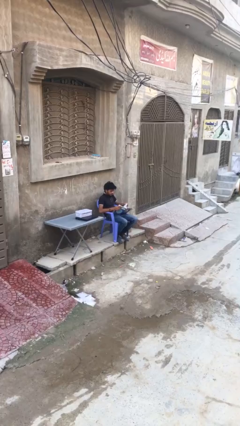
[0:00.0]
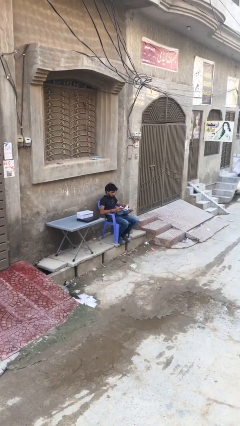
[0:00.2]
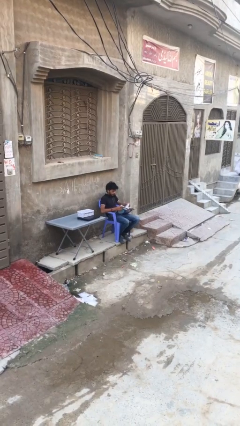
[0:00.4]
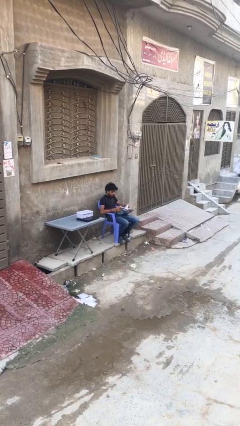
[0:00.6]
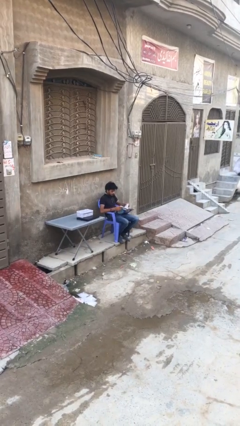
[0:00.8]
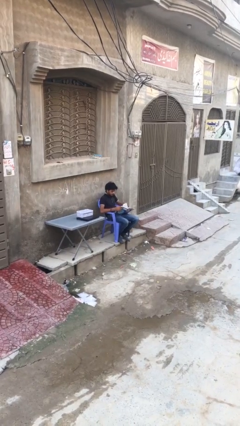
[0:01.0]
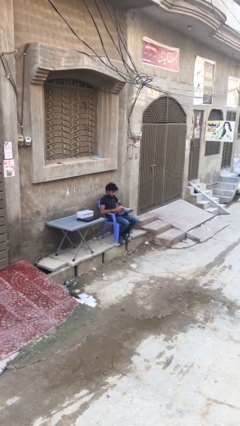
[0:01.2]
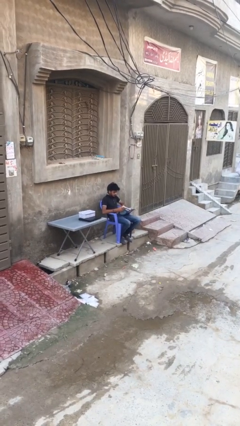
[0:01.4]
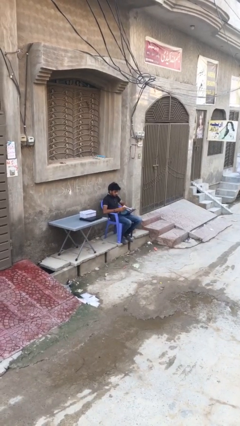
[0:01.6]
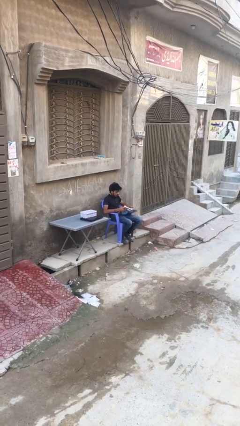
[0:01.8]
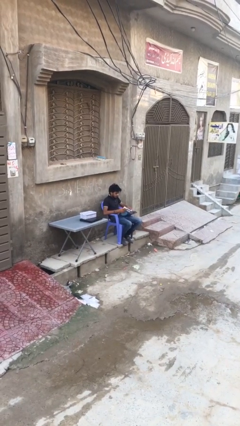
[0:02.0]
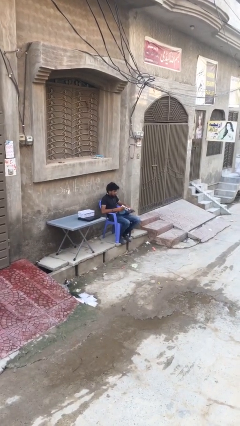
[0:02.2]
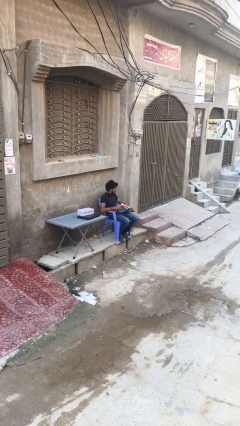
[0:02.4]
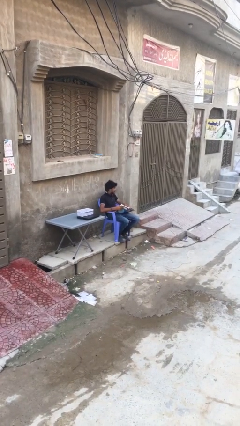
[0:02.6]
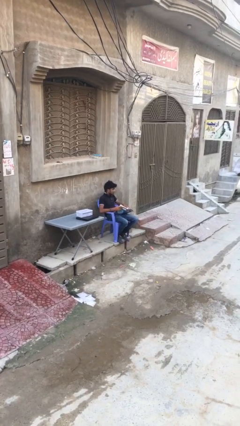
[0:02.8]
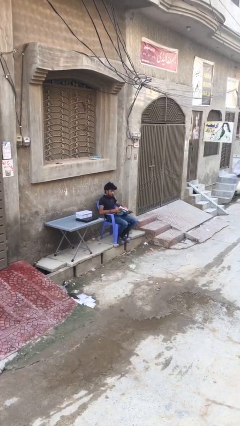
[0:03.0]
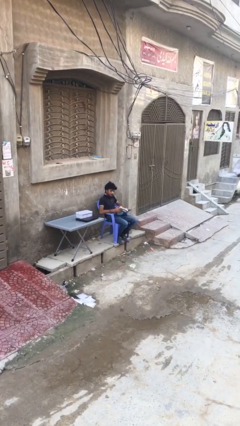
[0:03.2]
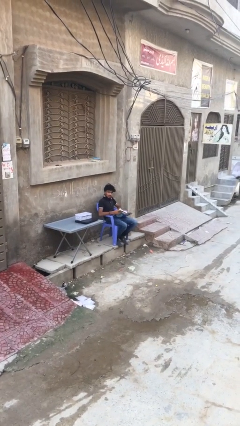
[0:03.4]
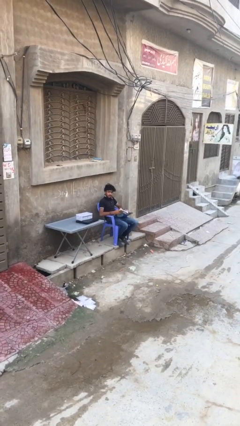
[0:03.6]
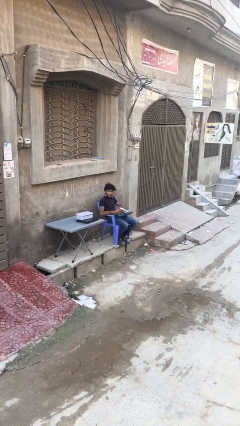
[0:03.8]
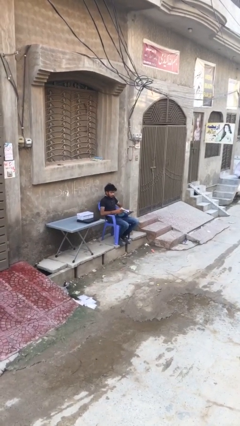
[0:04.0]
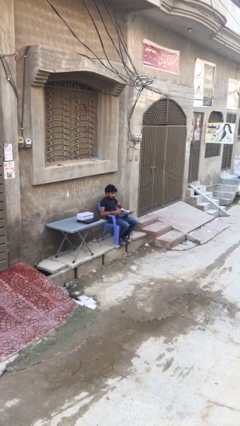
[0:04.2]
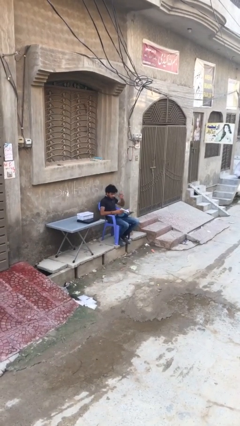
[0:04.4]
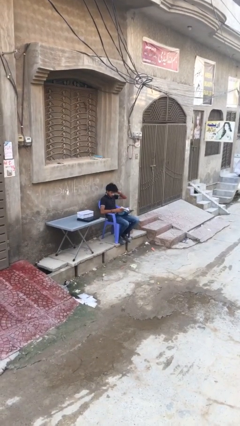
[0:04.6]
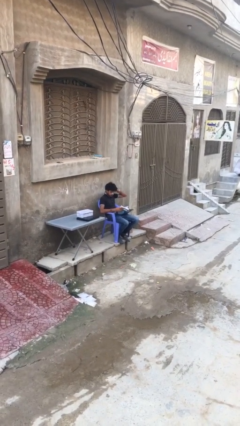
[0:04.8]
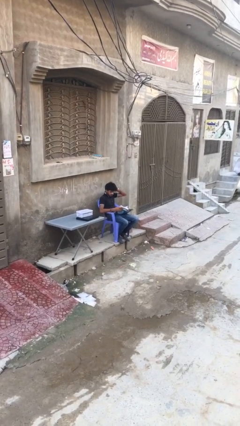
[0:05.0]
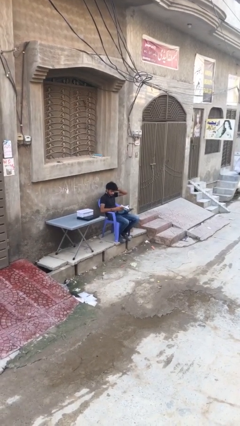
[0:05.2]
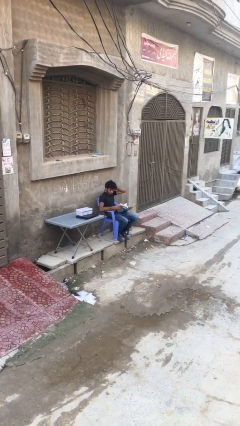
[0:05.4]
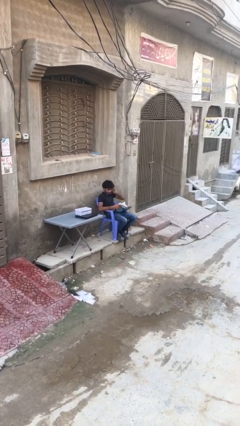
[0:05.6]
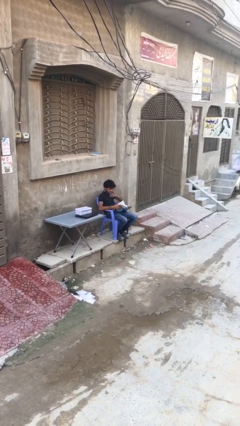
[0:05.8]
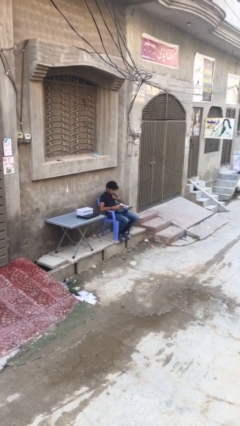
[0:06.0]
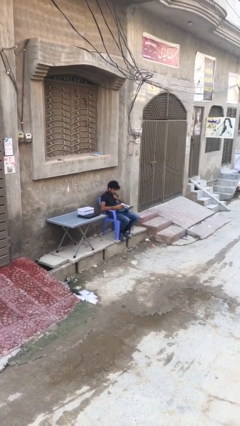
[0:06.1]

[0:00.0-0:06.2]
person reads document

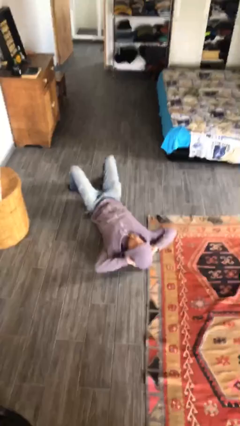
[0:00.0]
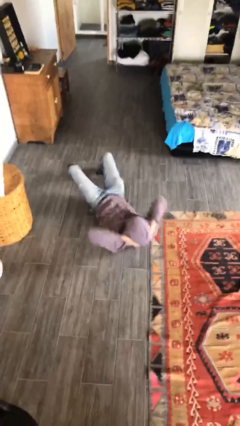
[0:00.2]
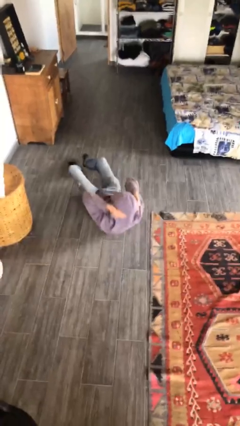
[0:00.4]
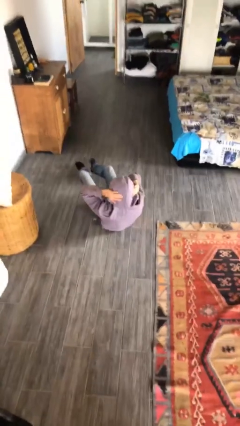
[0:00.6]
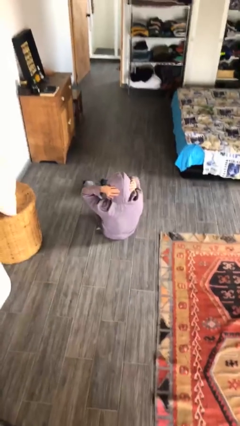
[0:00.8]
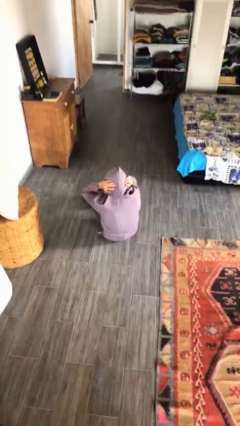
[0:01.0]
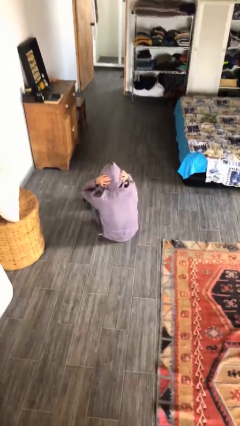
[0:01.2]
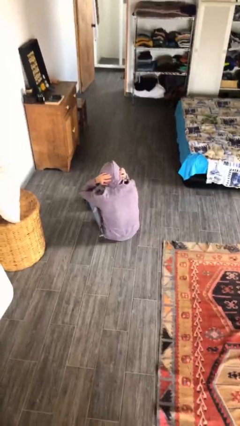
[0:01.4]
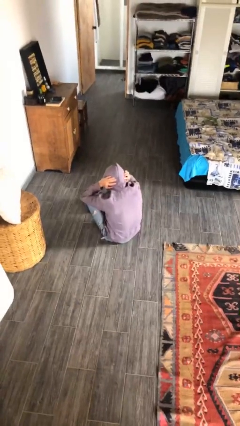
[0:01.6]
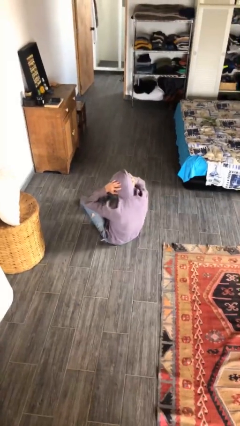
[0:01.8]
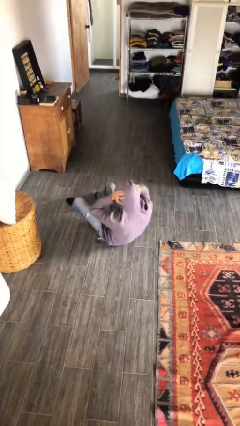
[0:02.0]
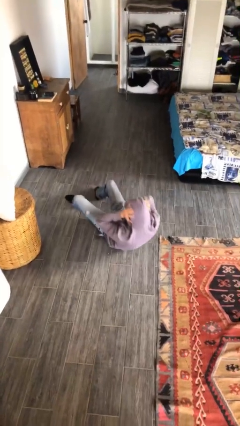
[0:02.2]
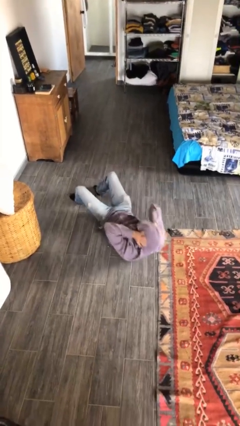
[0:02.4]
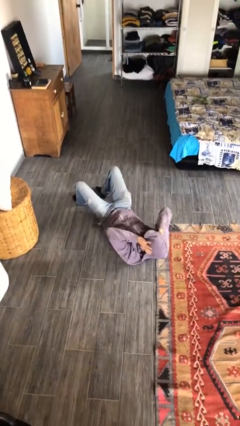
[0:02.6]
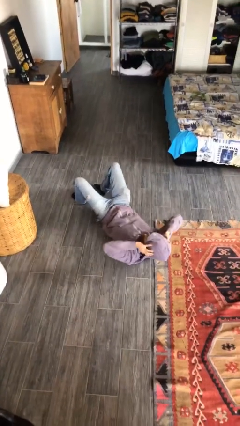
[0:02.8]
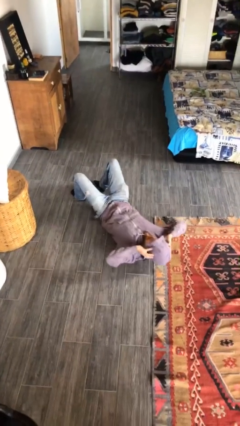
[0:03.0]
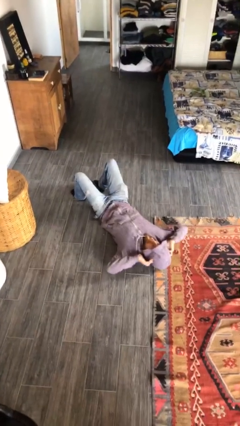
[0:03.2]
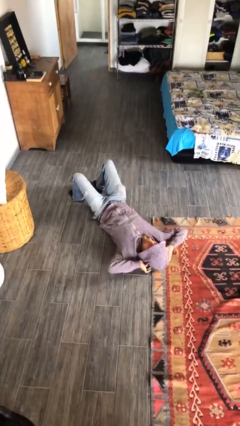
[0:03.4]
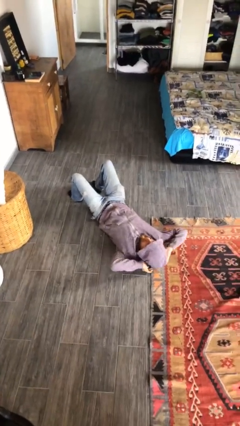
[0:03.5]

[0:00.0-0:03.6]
person exercises with situp

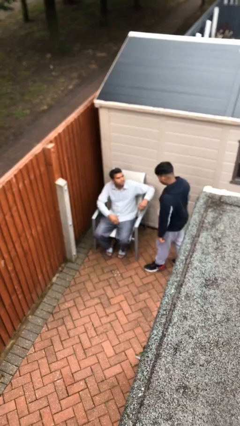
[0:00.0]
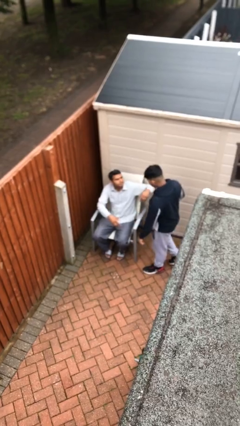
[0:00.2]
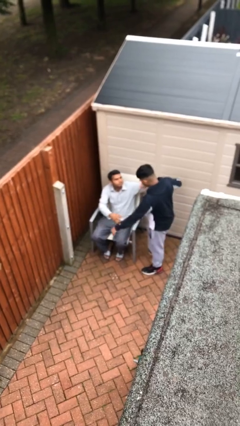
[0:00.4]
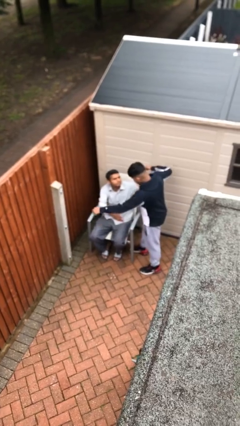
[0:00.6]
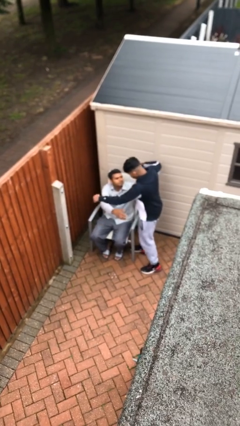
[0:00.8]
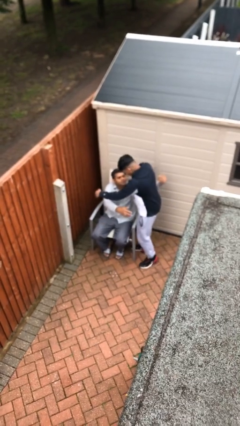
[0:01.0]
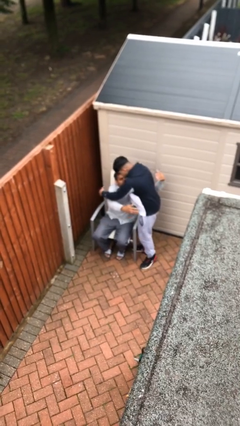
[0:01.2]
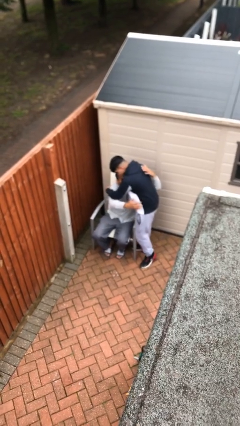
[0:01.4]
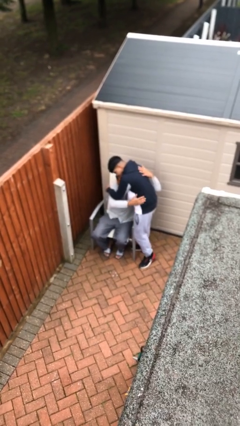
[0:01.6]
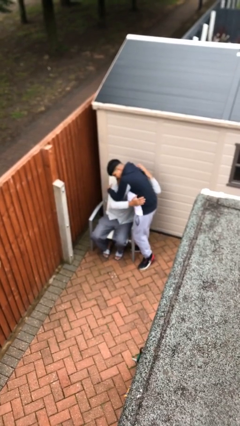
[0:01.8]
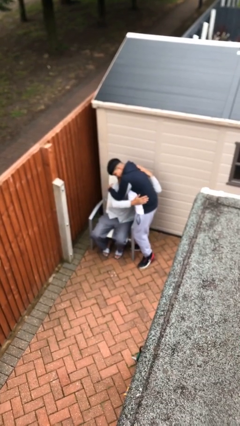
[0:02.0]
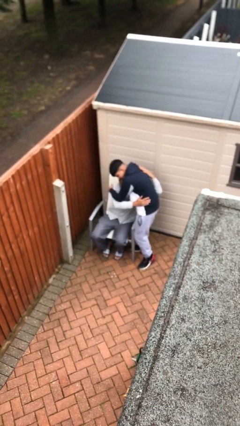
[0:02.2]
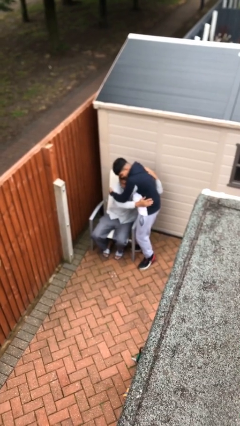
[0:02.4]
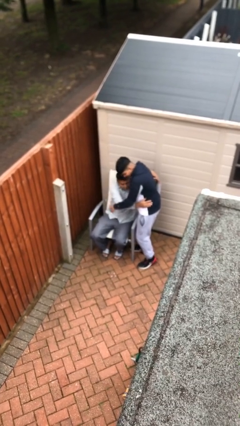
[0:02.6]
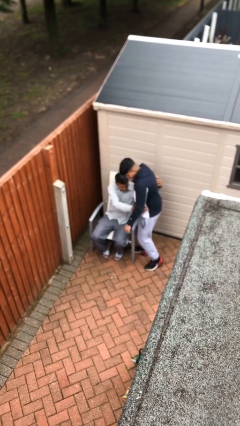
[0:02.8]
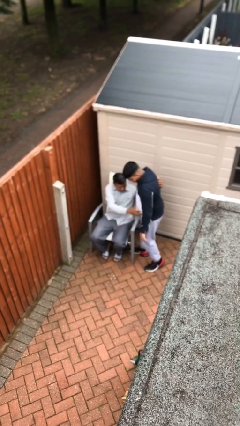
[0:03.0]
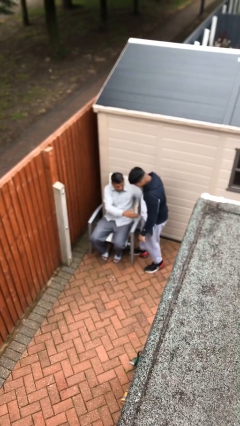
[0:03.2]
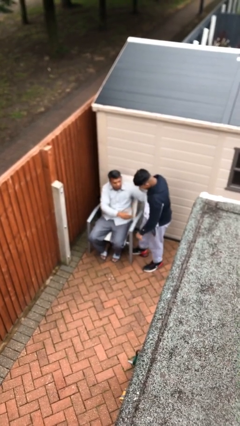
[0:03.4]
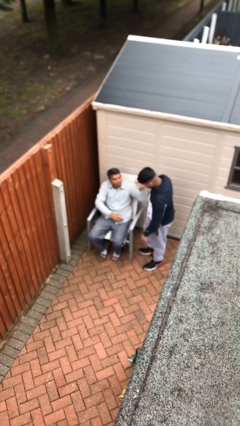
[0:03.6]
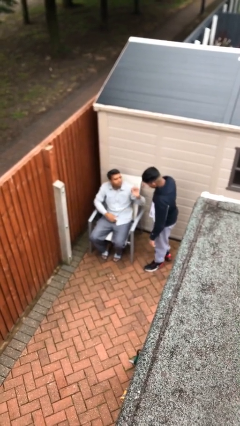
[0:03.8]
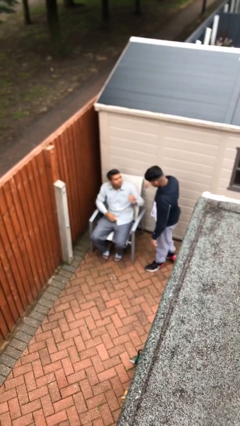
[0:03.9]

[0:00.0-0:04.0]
person embraces person

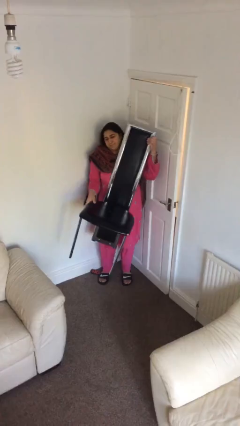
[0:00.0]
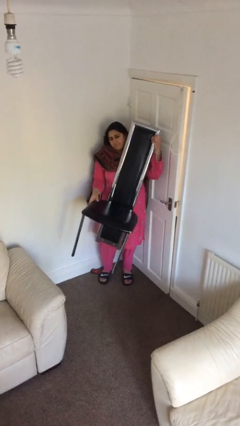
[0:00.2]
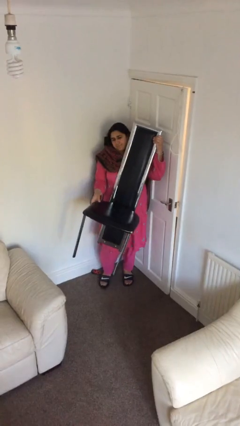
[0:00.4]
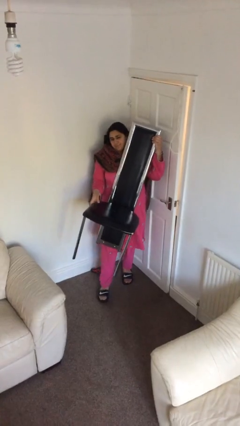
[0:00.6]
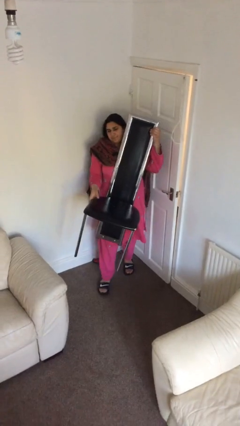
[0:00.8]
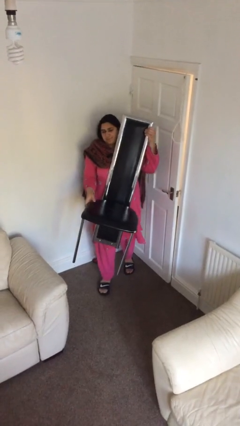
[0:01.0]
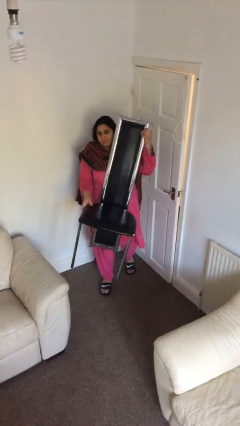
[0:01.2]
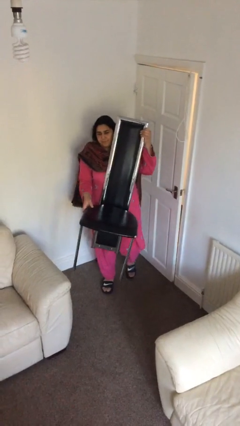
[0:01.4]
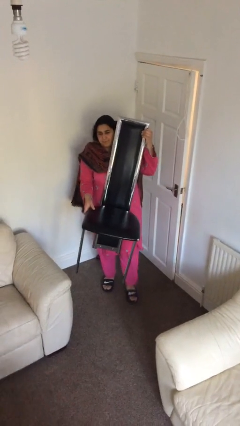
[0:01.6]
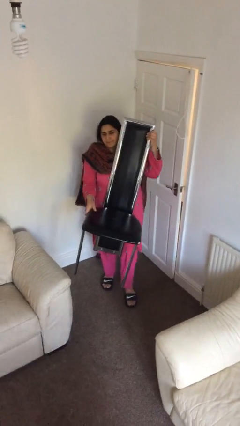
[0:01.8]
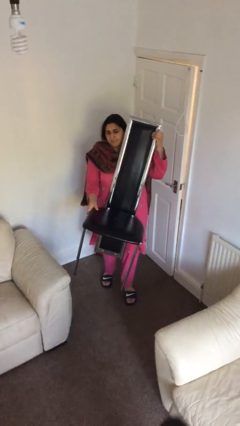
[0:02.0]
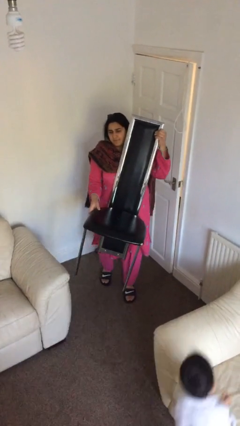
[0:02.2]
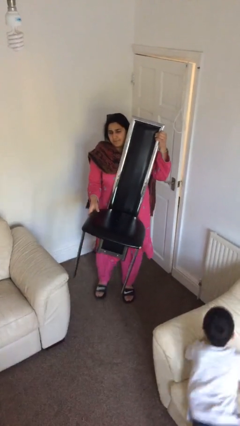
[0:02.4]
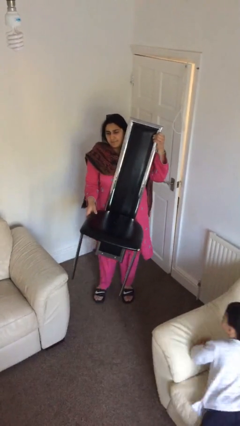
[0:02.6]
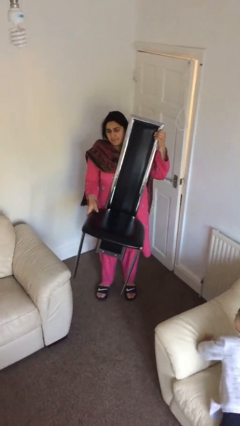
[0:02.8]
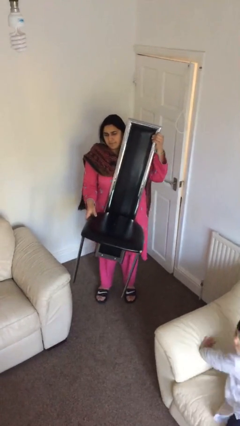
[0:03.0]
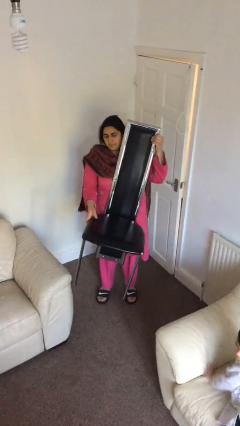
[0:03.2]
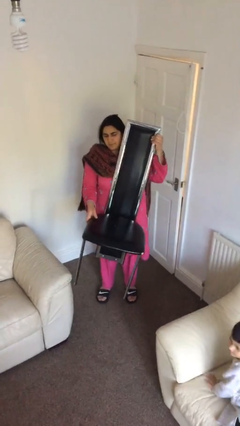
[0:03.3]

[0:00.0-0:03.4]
person carries heavy object

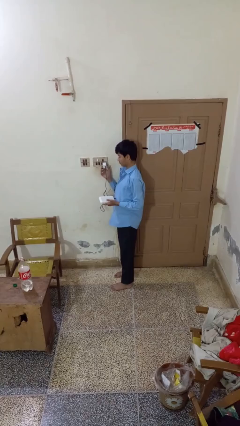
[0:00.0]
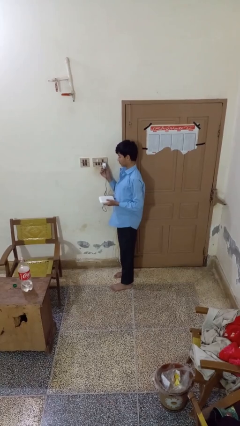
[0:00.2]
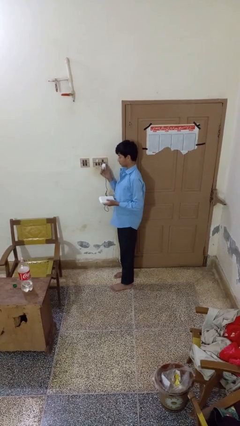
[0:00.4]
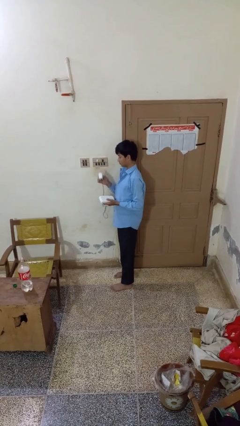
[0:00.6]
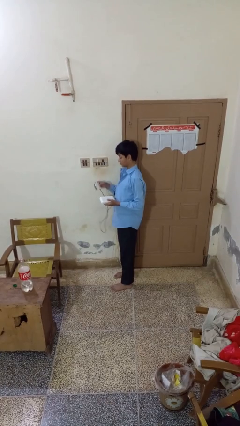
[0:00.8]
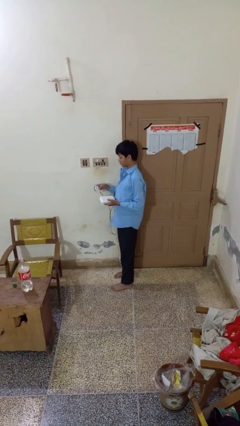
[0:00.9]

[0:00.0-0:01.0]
person unplugs from electrical socket
